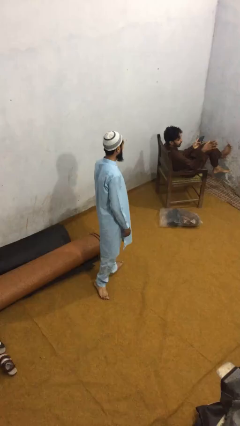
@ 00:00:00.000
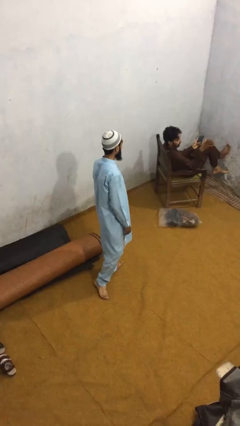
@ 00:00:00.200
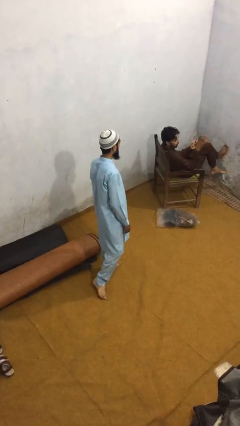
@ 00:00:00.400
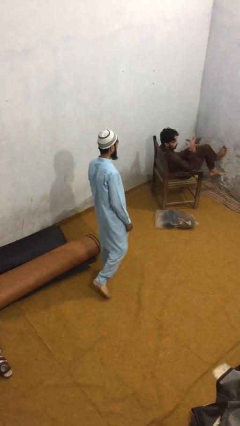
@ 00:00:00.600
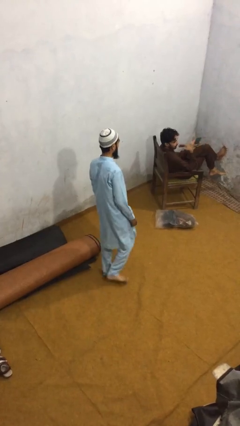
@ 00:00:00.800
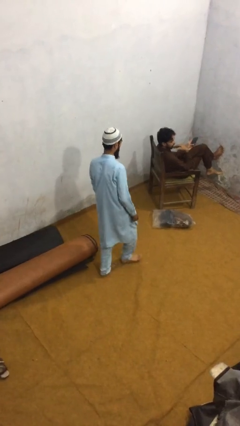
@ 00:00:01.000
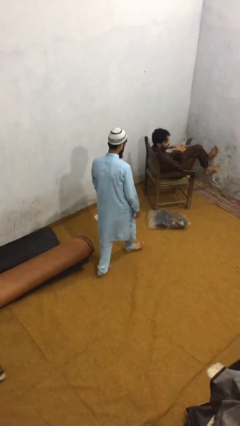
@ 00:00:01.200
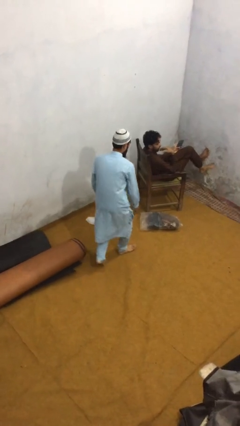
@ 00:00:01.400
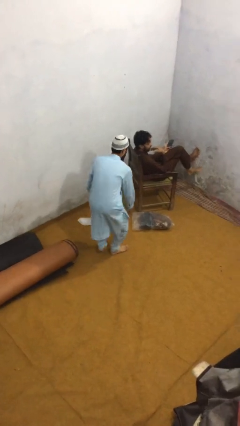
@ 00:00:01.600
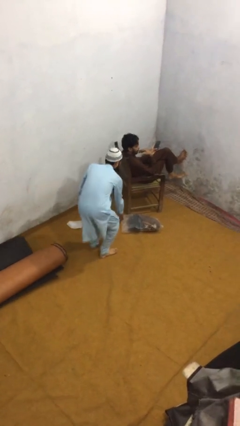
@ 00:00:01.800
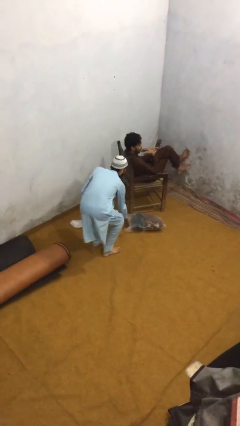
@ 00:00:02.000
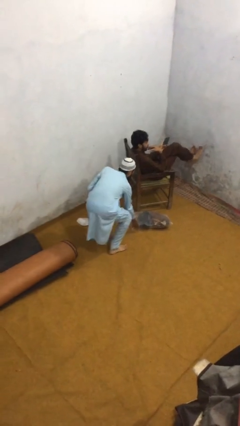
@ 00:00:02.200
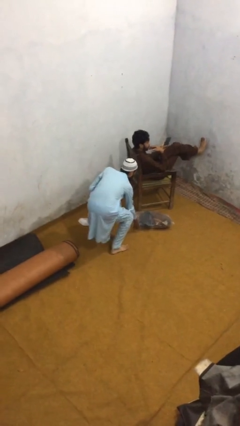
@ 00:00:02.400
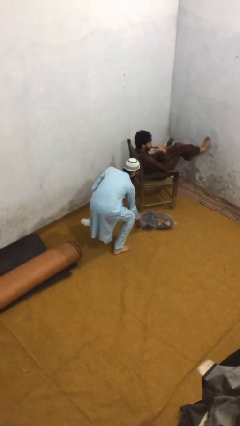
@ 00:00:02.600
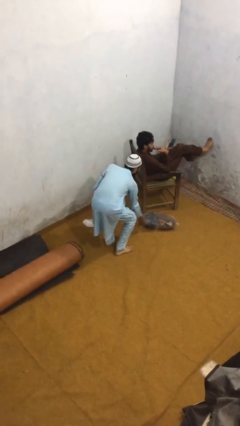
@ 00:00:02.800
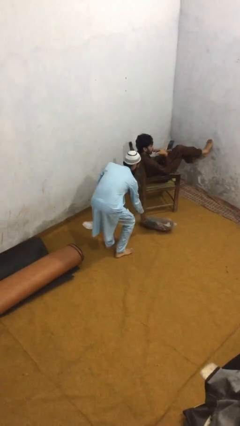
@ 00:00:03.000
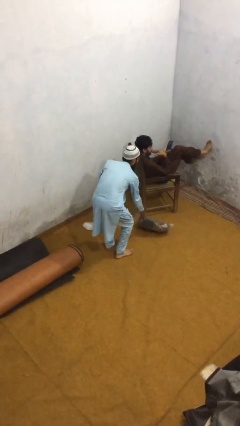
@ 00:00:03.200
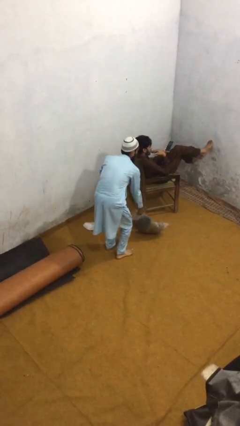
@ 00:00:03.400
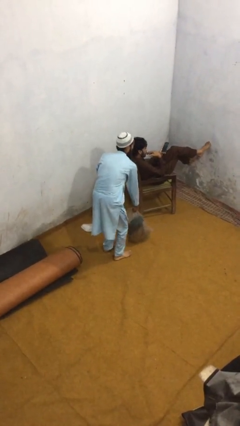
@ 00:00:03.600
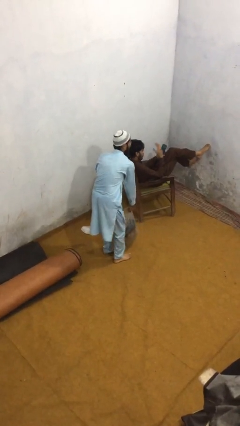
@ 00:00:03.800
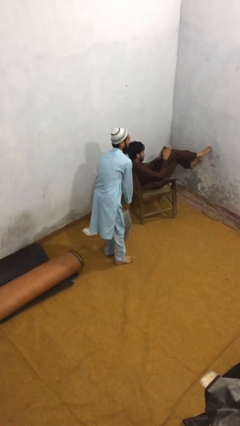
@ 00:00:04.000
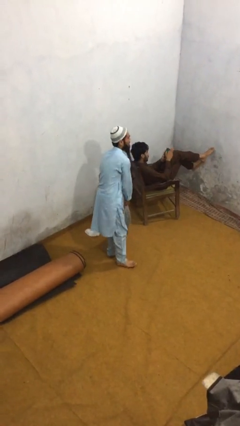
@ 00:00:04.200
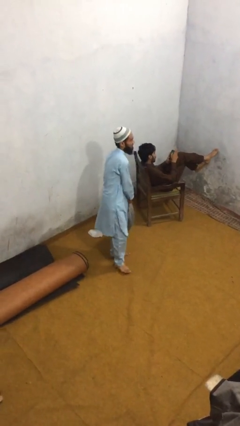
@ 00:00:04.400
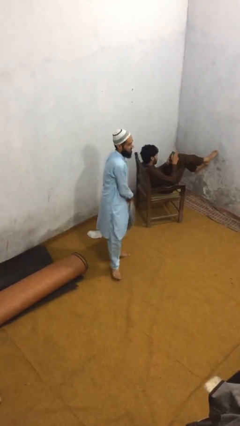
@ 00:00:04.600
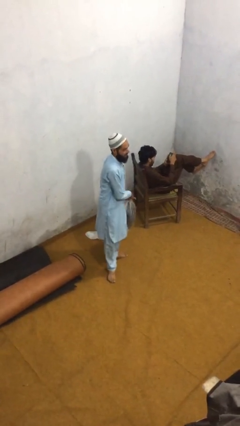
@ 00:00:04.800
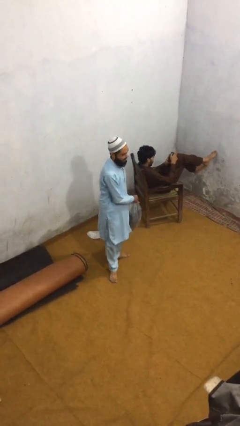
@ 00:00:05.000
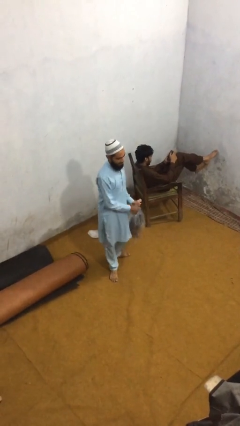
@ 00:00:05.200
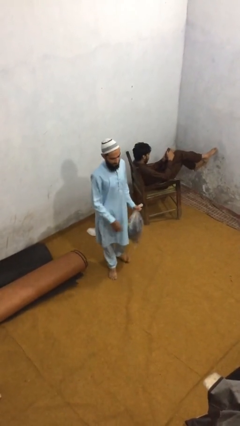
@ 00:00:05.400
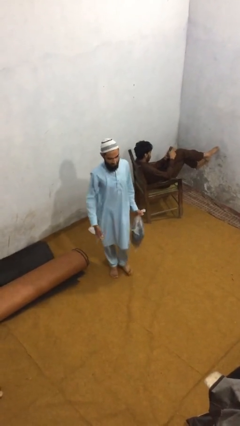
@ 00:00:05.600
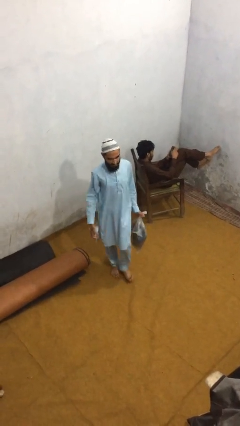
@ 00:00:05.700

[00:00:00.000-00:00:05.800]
person steals object from person

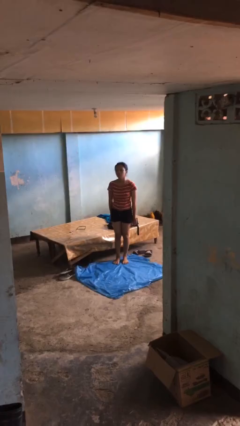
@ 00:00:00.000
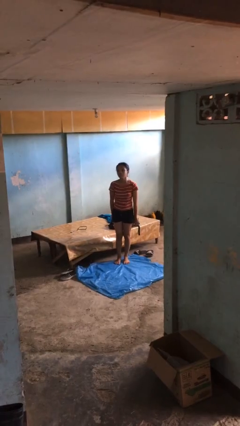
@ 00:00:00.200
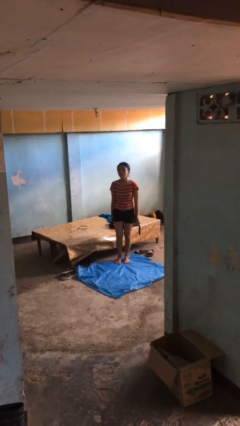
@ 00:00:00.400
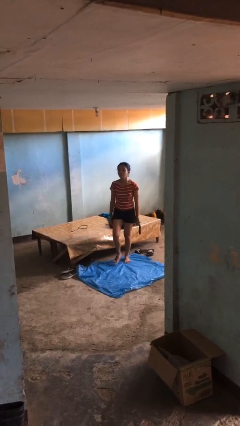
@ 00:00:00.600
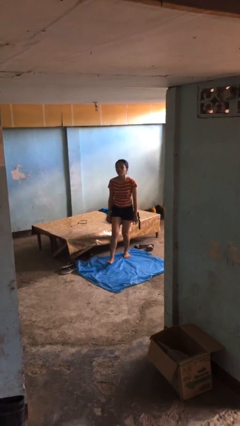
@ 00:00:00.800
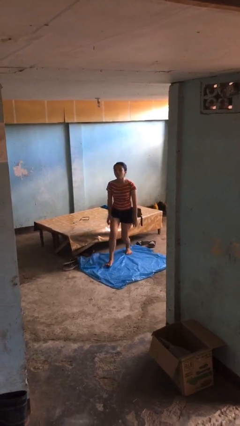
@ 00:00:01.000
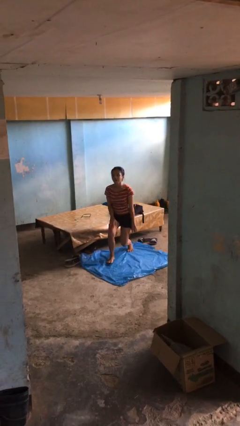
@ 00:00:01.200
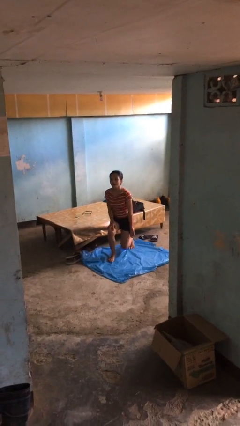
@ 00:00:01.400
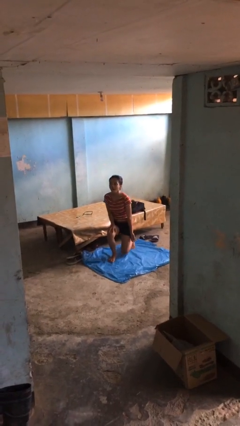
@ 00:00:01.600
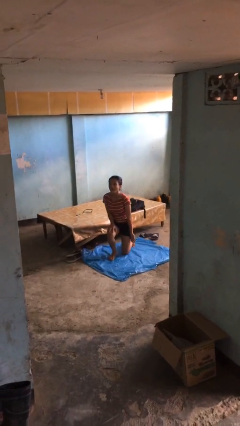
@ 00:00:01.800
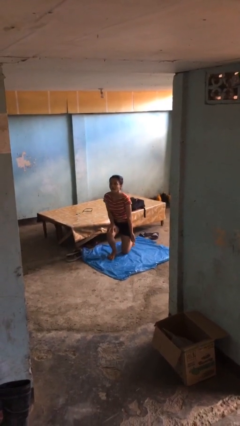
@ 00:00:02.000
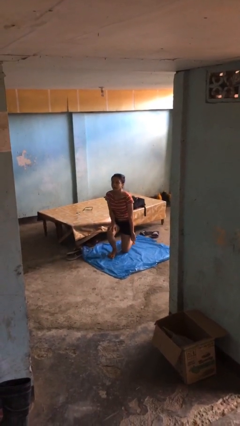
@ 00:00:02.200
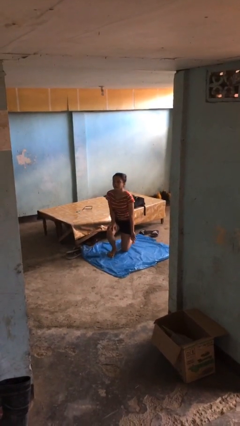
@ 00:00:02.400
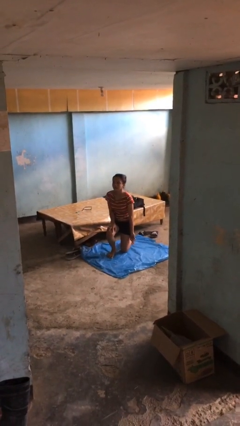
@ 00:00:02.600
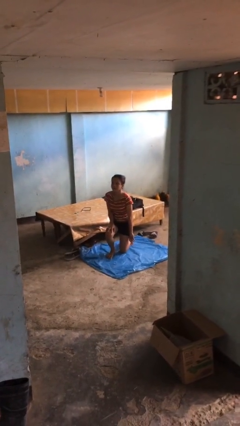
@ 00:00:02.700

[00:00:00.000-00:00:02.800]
person kneels

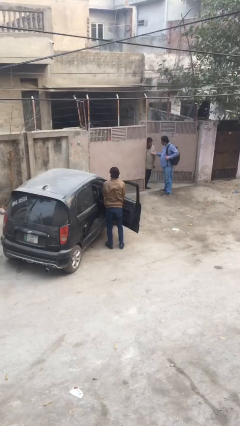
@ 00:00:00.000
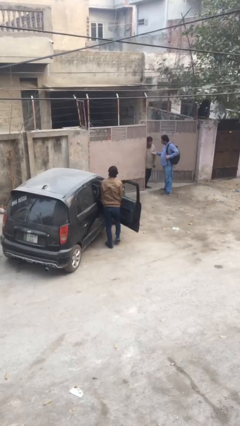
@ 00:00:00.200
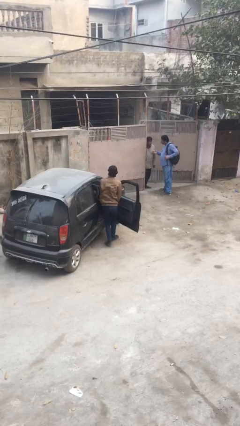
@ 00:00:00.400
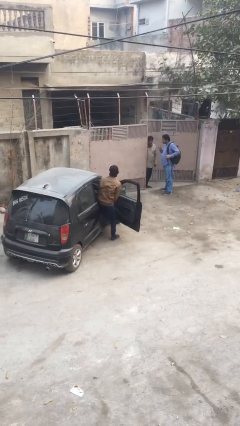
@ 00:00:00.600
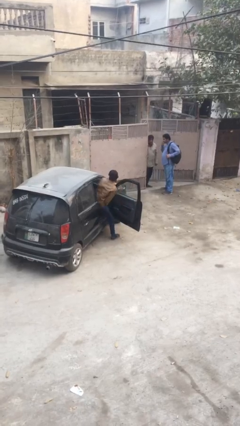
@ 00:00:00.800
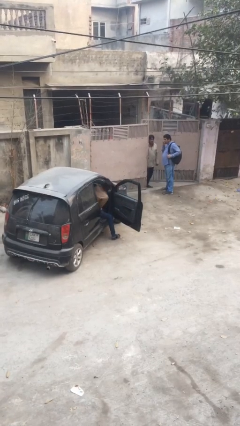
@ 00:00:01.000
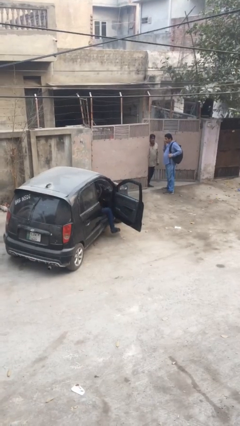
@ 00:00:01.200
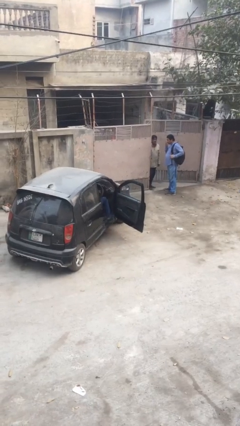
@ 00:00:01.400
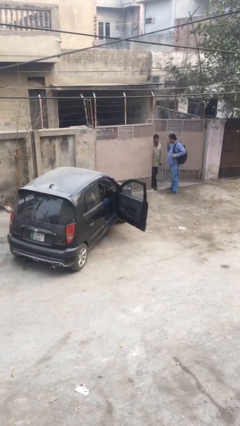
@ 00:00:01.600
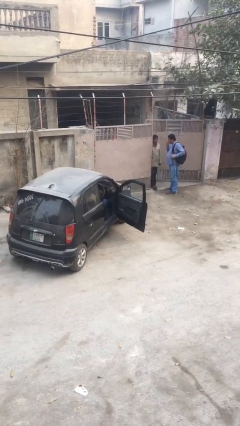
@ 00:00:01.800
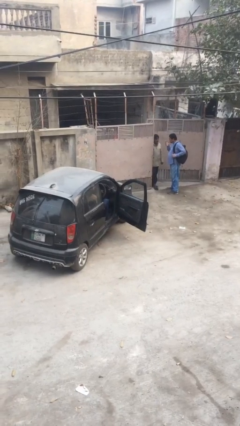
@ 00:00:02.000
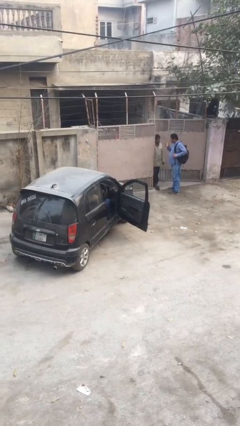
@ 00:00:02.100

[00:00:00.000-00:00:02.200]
person enters car

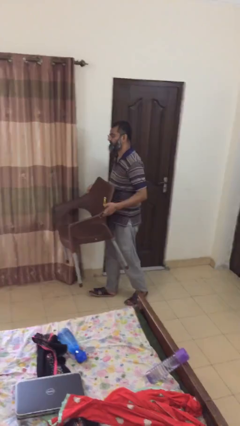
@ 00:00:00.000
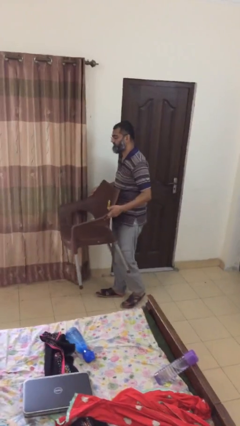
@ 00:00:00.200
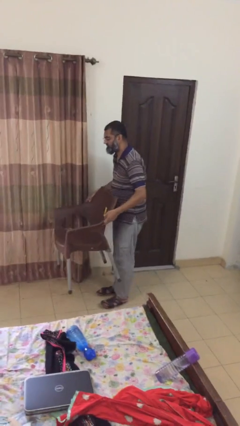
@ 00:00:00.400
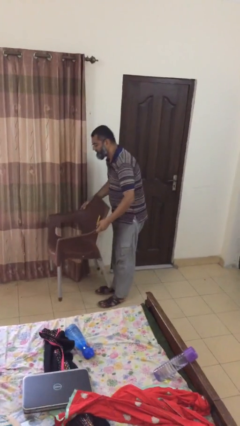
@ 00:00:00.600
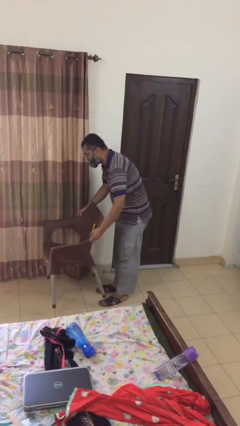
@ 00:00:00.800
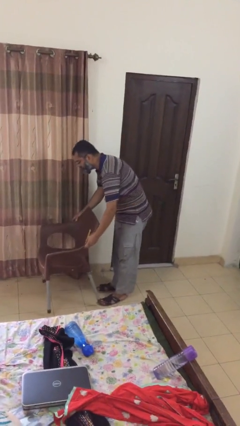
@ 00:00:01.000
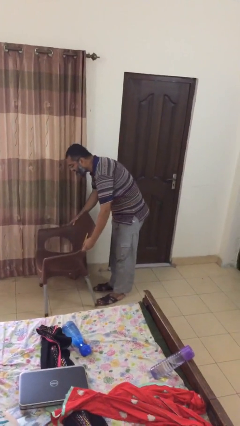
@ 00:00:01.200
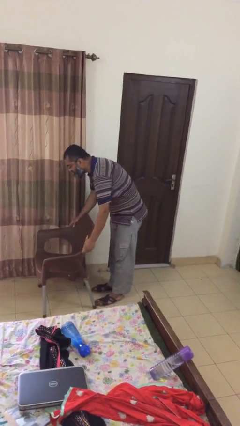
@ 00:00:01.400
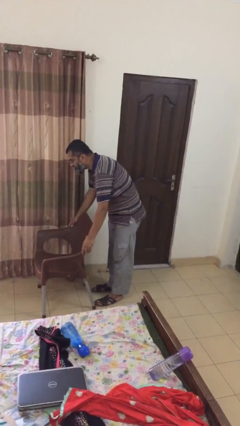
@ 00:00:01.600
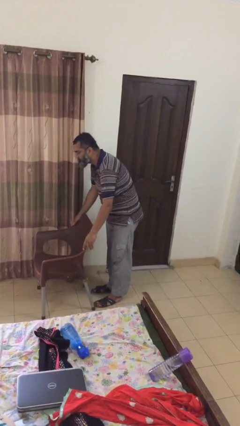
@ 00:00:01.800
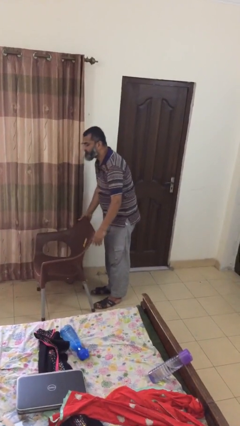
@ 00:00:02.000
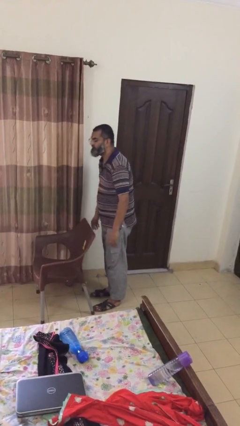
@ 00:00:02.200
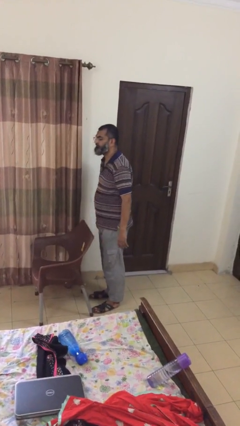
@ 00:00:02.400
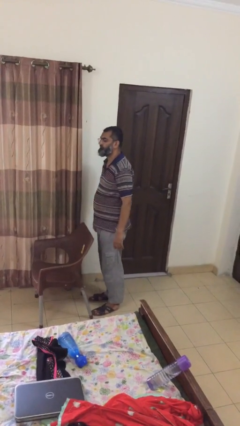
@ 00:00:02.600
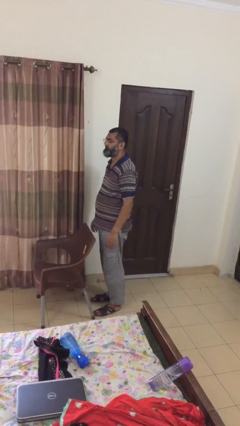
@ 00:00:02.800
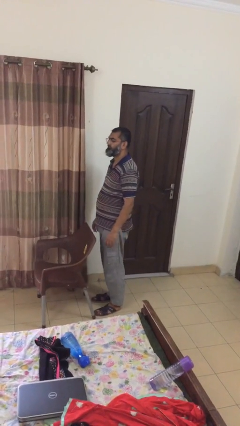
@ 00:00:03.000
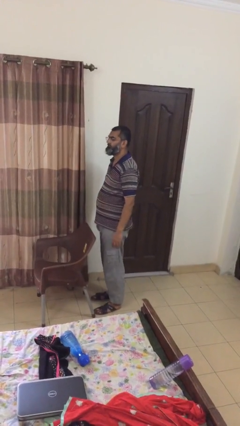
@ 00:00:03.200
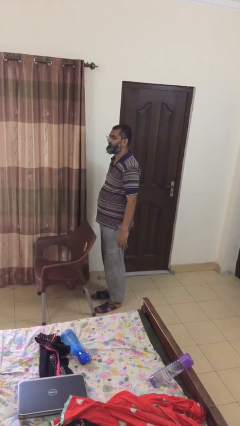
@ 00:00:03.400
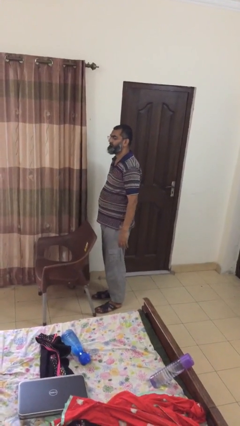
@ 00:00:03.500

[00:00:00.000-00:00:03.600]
person puts down object on floor

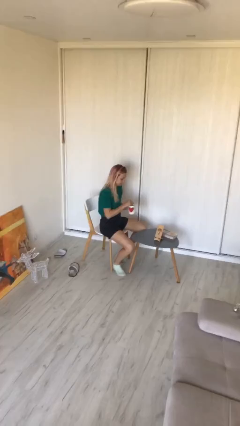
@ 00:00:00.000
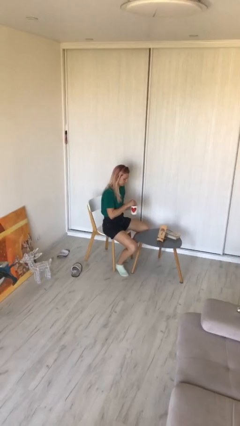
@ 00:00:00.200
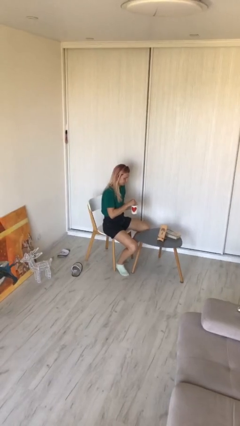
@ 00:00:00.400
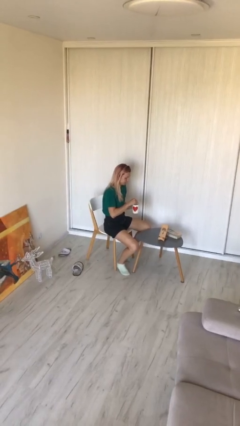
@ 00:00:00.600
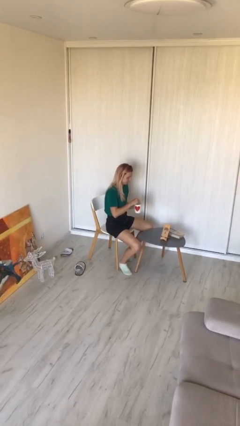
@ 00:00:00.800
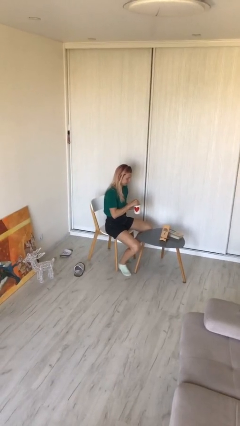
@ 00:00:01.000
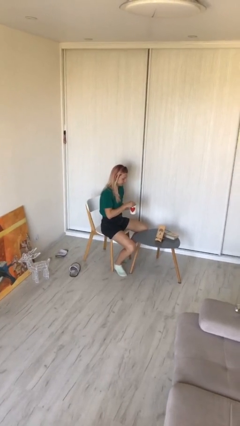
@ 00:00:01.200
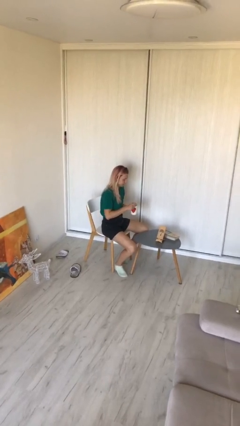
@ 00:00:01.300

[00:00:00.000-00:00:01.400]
person stirs mug

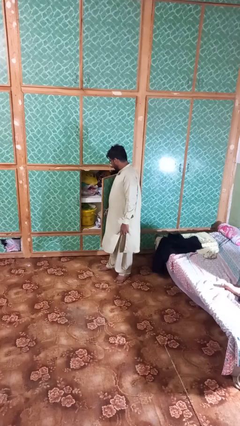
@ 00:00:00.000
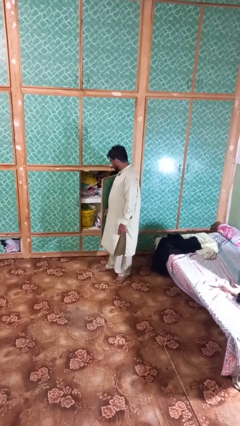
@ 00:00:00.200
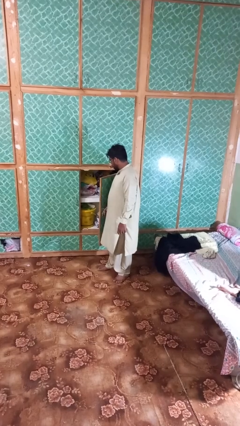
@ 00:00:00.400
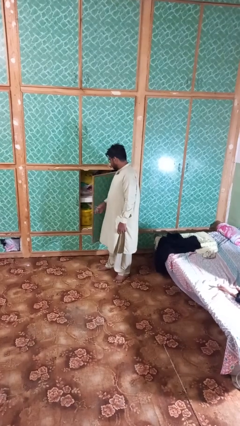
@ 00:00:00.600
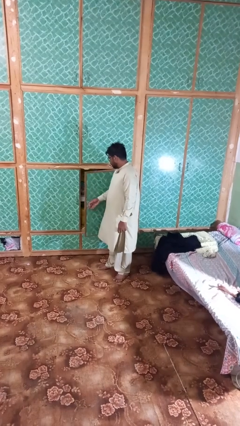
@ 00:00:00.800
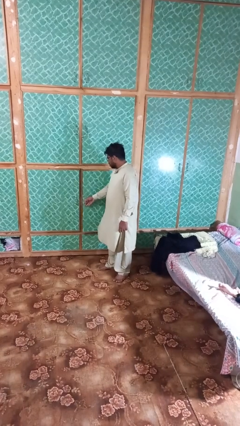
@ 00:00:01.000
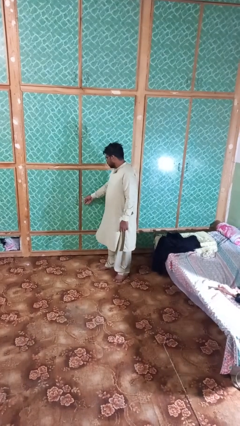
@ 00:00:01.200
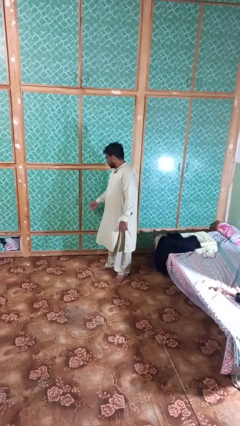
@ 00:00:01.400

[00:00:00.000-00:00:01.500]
person closes closet door
